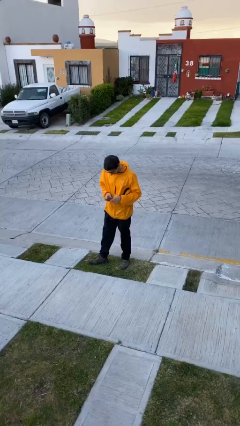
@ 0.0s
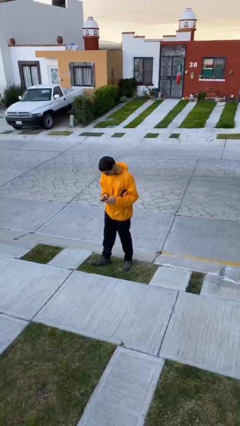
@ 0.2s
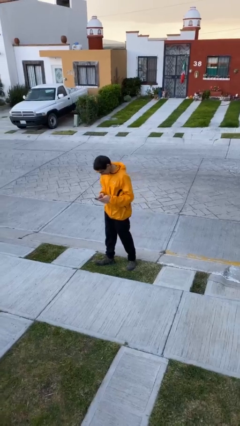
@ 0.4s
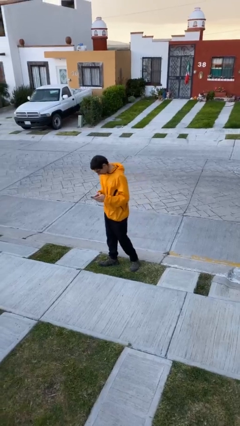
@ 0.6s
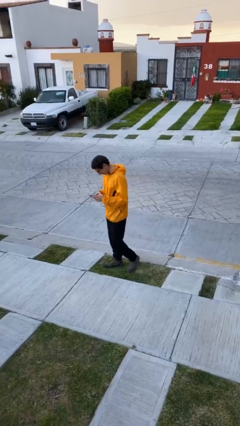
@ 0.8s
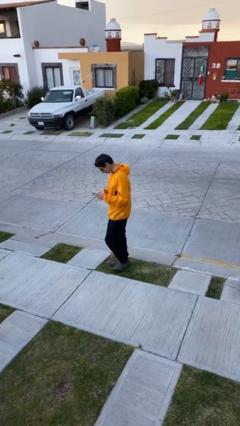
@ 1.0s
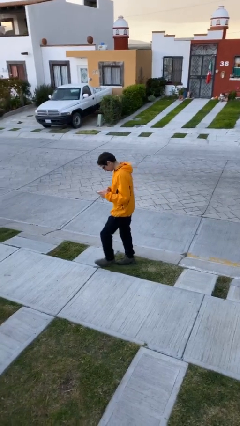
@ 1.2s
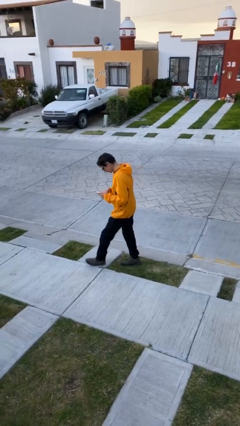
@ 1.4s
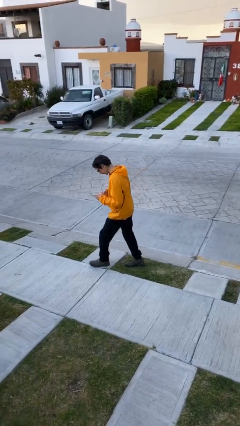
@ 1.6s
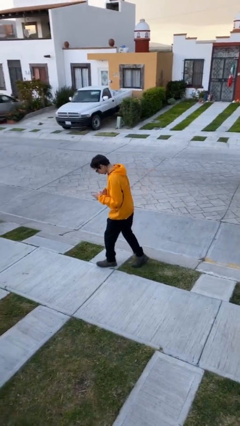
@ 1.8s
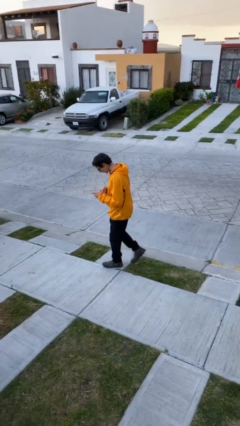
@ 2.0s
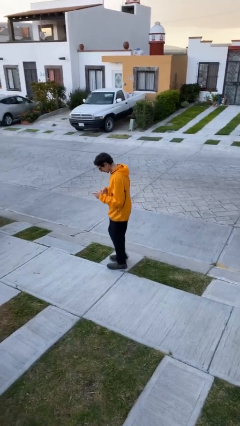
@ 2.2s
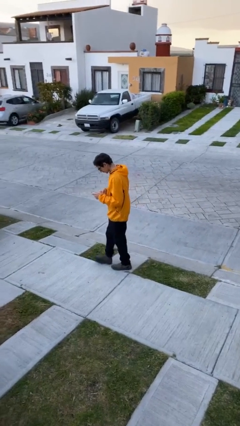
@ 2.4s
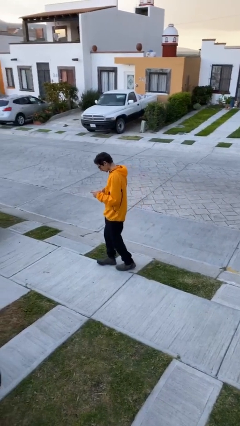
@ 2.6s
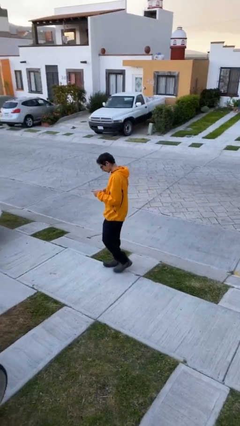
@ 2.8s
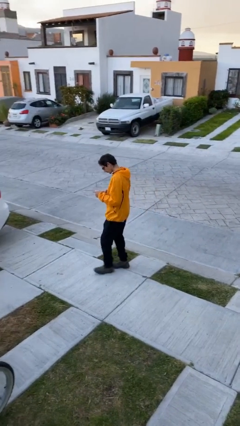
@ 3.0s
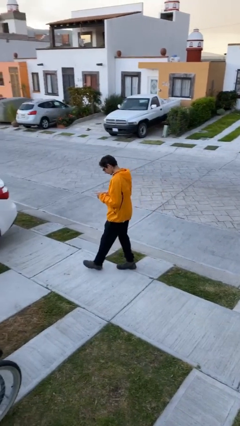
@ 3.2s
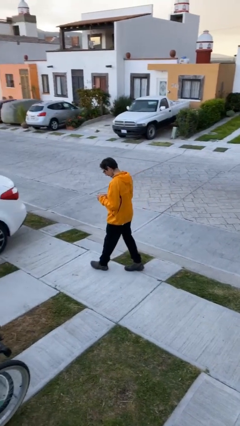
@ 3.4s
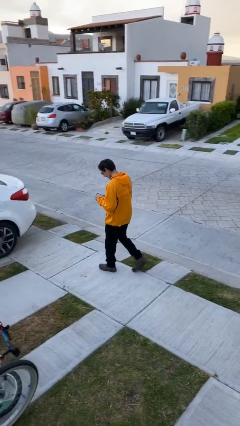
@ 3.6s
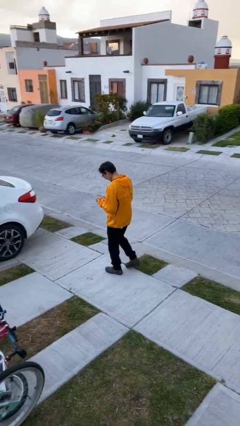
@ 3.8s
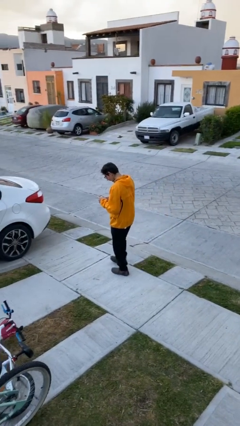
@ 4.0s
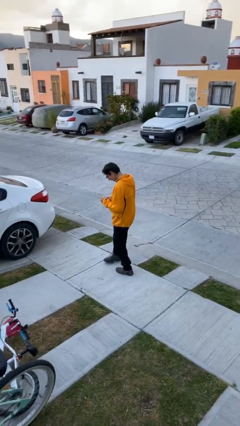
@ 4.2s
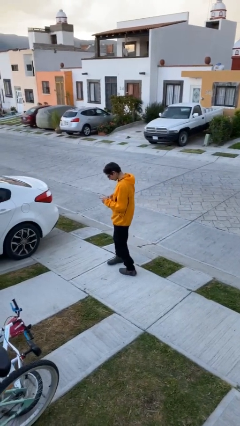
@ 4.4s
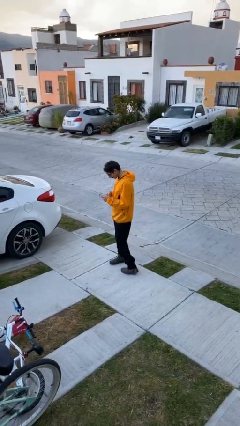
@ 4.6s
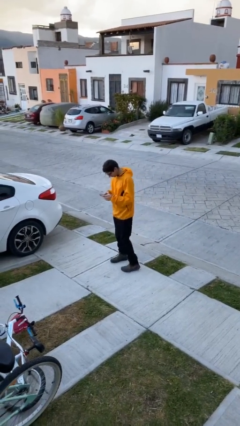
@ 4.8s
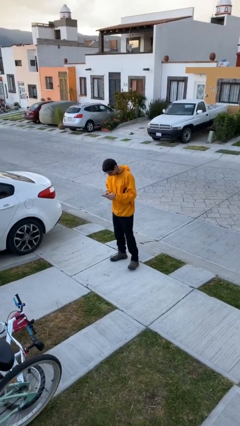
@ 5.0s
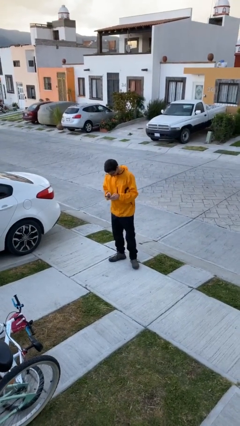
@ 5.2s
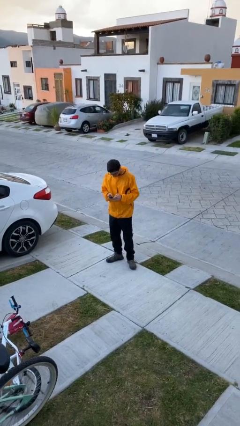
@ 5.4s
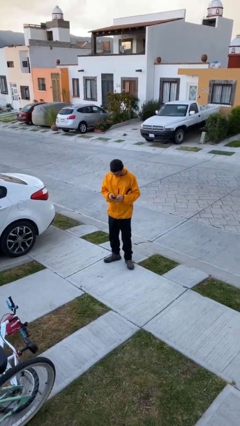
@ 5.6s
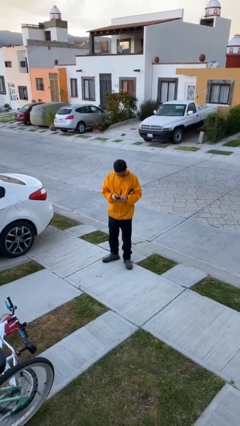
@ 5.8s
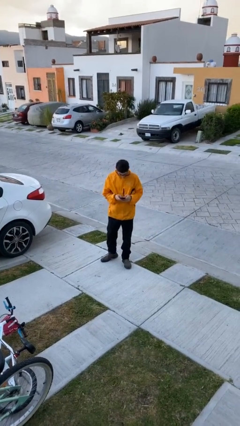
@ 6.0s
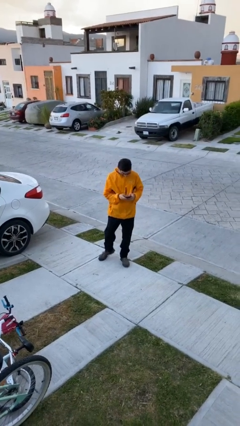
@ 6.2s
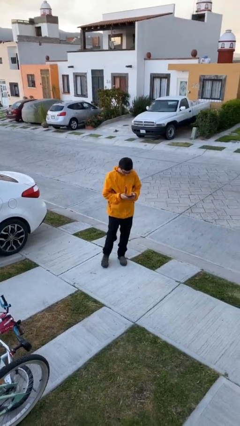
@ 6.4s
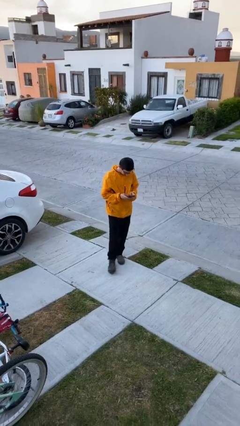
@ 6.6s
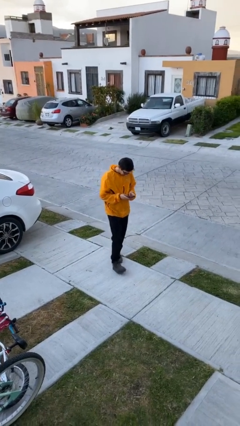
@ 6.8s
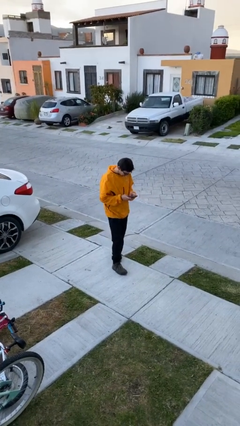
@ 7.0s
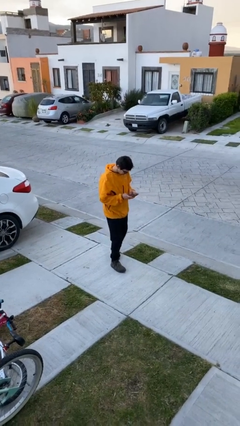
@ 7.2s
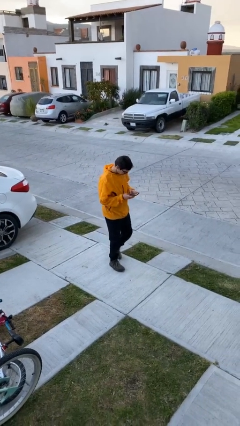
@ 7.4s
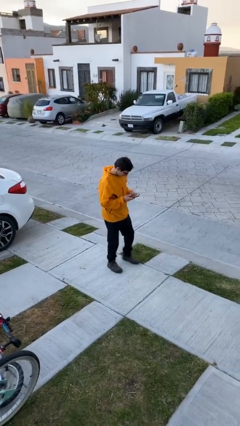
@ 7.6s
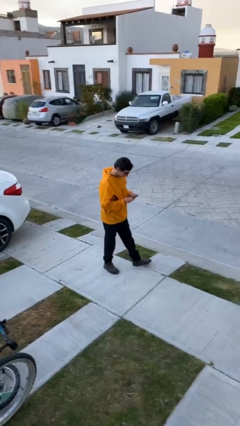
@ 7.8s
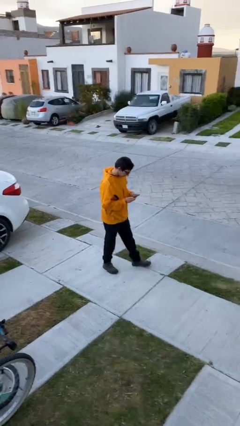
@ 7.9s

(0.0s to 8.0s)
person texts on phone

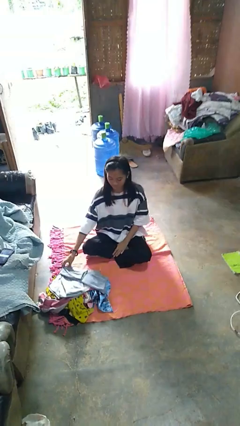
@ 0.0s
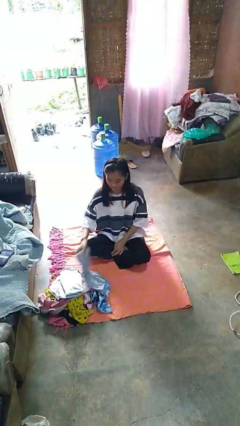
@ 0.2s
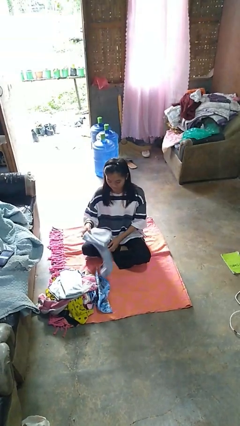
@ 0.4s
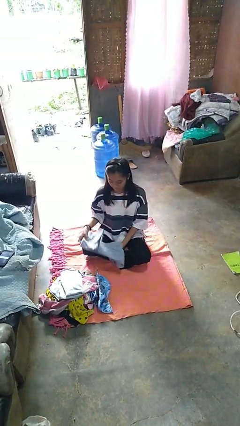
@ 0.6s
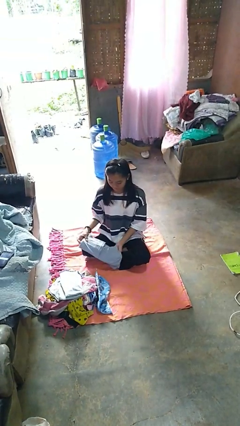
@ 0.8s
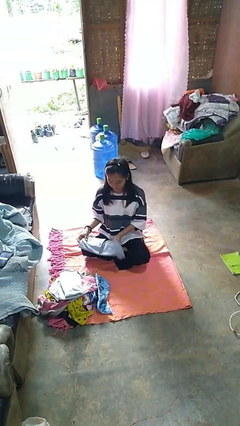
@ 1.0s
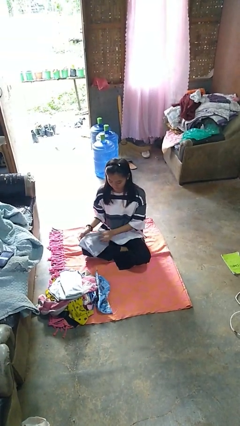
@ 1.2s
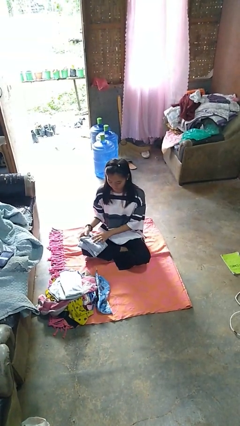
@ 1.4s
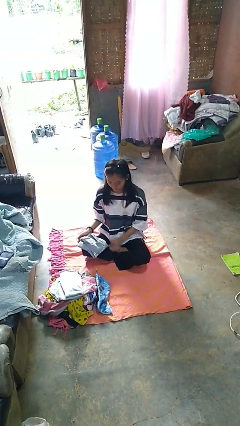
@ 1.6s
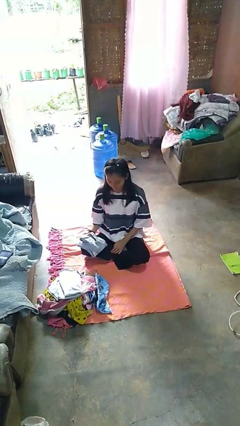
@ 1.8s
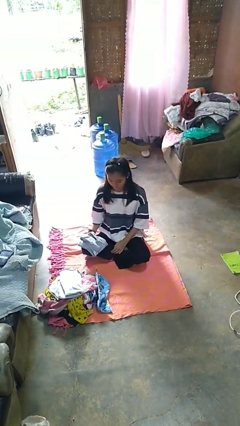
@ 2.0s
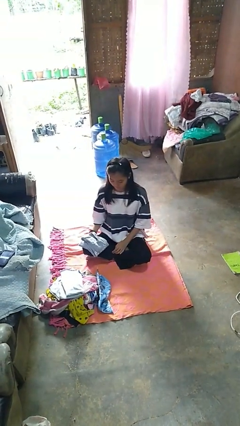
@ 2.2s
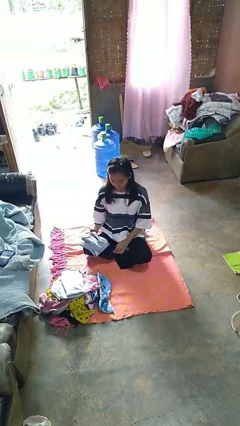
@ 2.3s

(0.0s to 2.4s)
person folds shirt

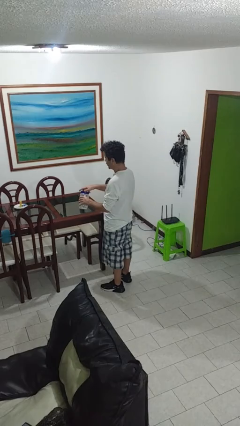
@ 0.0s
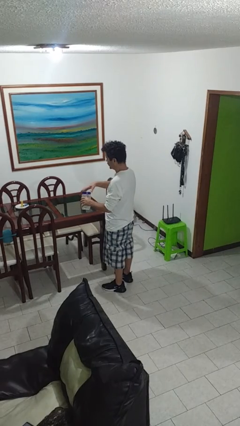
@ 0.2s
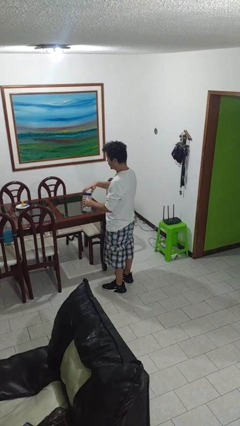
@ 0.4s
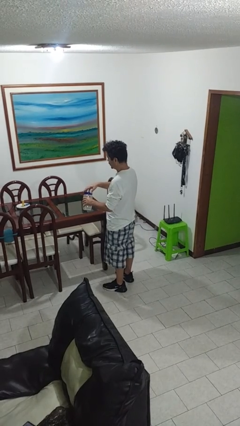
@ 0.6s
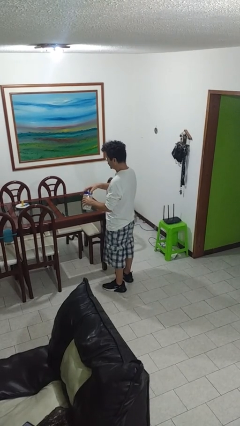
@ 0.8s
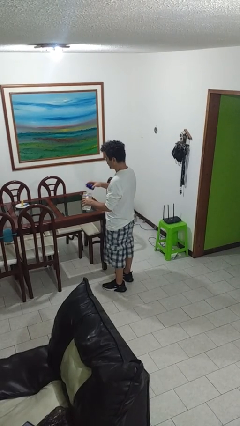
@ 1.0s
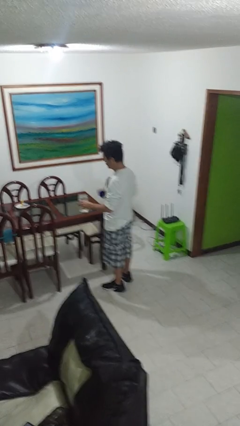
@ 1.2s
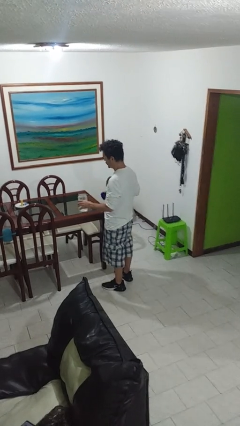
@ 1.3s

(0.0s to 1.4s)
person opens jar

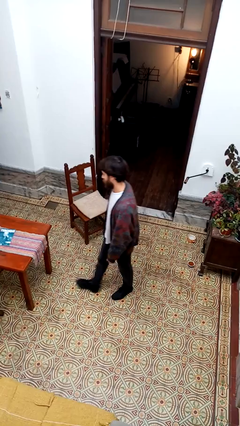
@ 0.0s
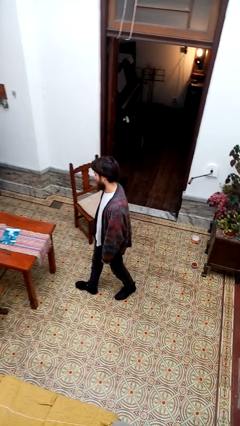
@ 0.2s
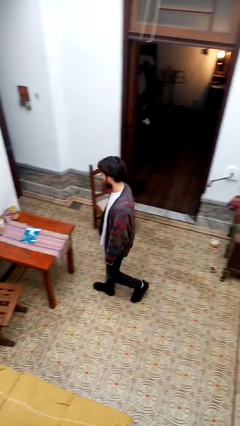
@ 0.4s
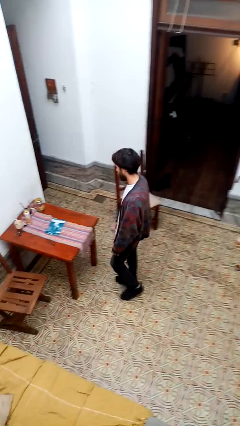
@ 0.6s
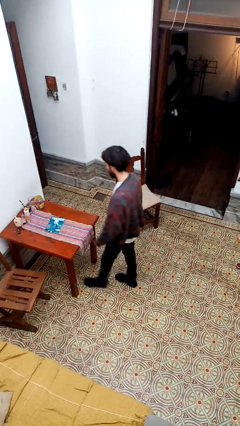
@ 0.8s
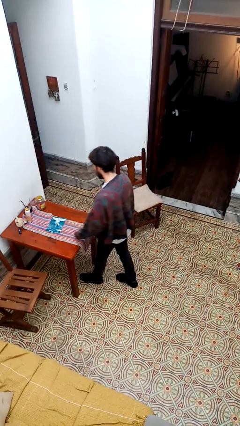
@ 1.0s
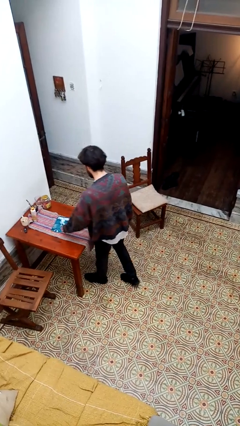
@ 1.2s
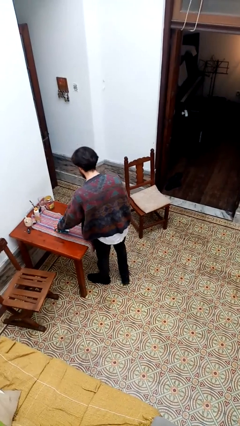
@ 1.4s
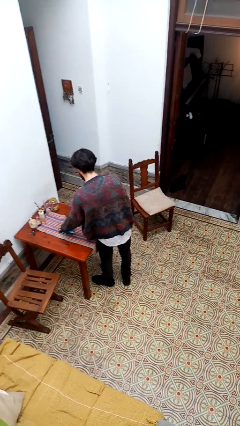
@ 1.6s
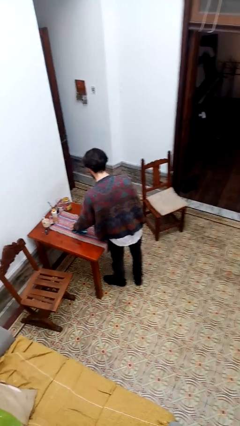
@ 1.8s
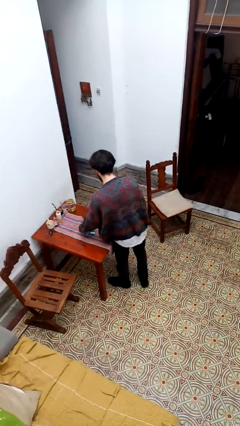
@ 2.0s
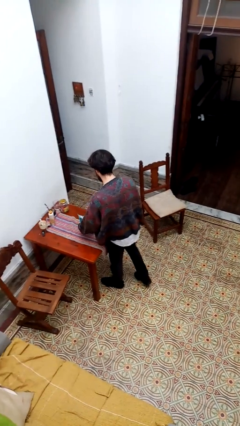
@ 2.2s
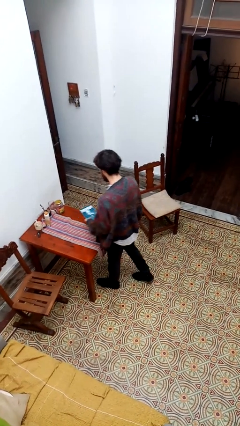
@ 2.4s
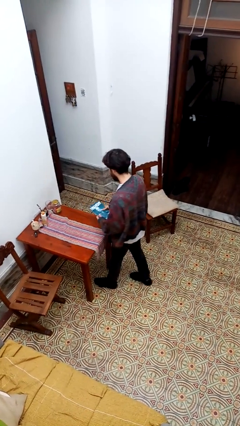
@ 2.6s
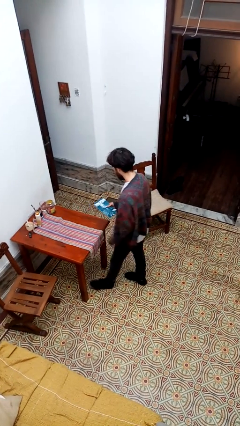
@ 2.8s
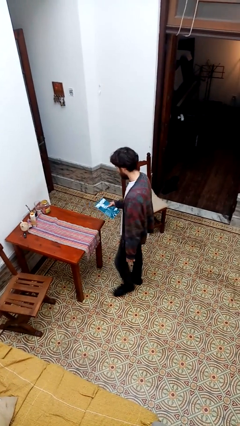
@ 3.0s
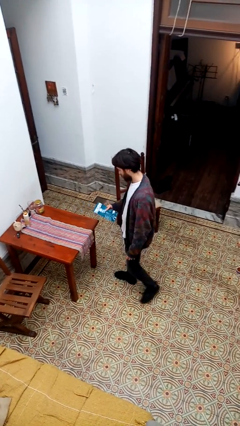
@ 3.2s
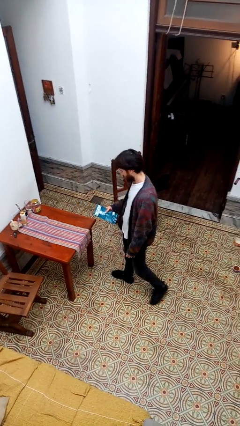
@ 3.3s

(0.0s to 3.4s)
person picks up object from table

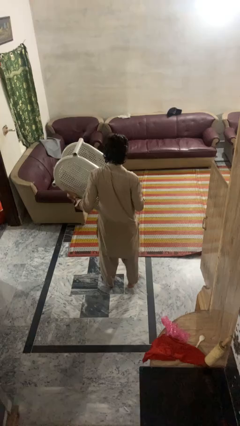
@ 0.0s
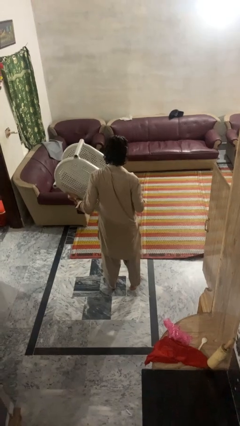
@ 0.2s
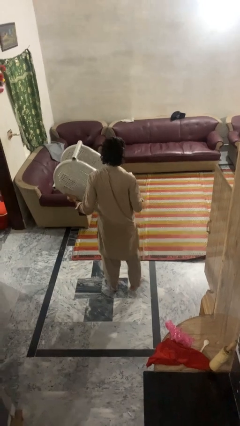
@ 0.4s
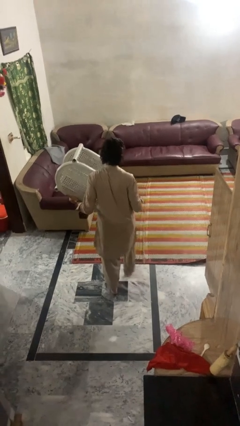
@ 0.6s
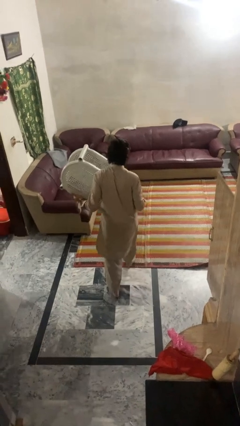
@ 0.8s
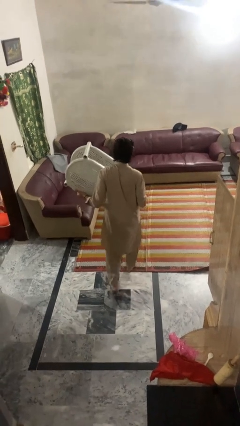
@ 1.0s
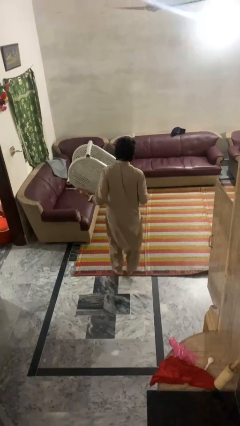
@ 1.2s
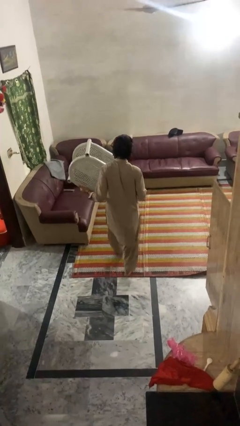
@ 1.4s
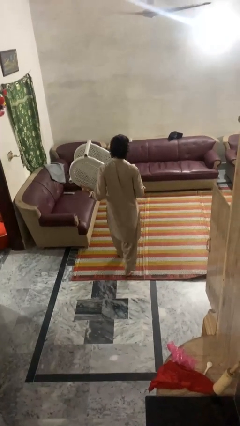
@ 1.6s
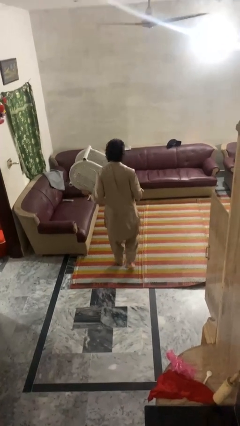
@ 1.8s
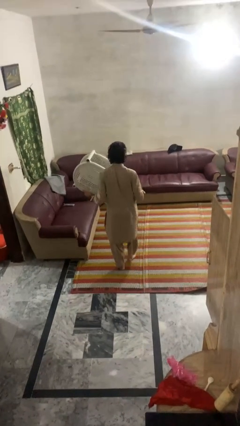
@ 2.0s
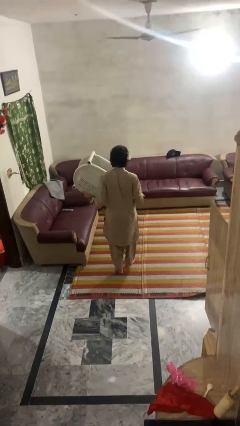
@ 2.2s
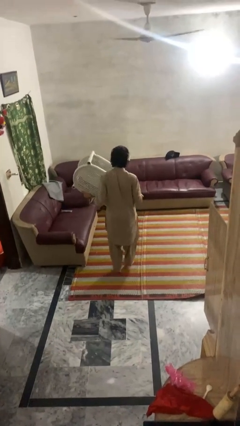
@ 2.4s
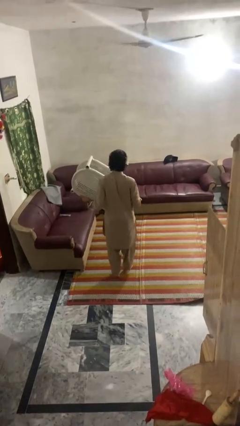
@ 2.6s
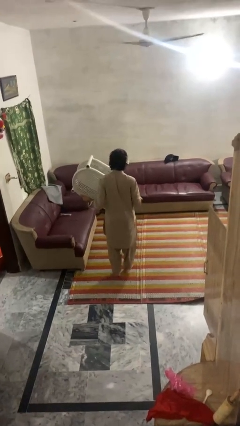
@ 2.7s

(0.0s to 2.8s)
person carries groceries

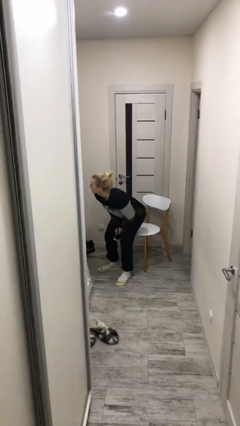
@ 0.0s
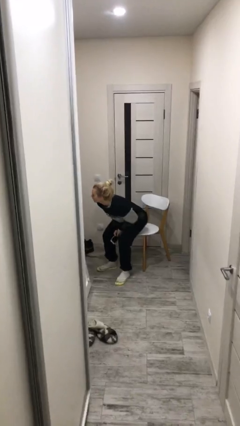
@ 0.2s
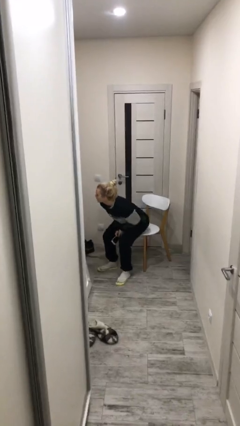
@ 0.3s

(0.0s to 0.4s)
person sits down
